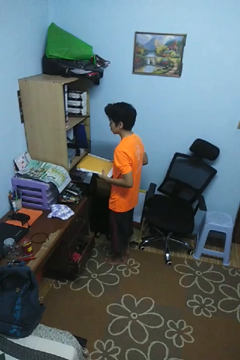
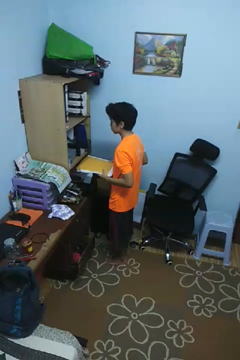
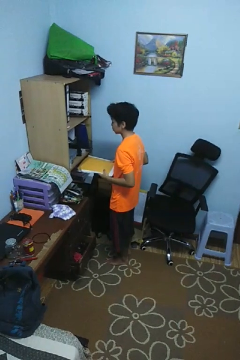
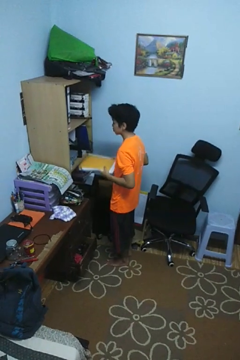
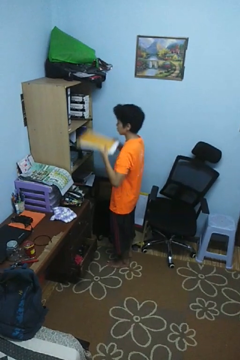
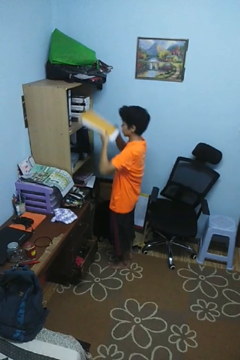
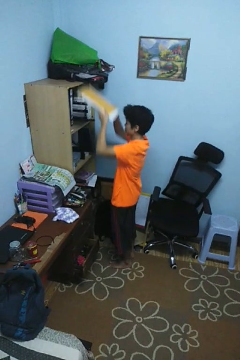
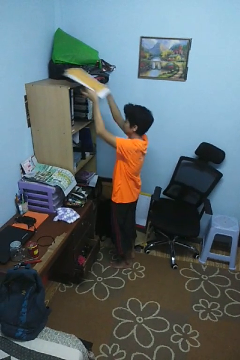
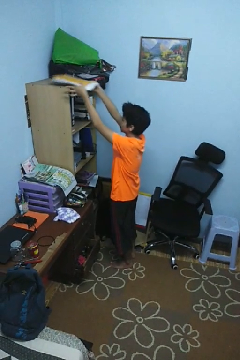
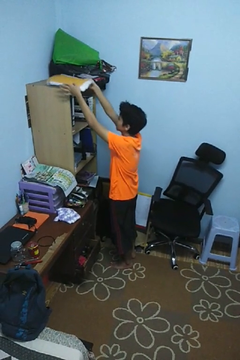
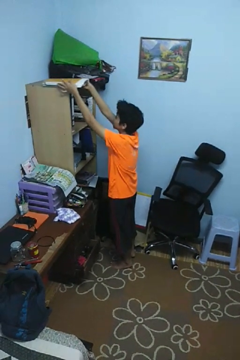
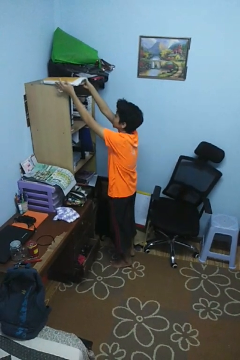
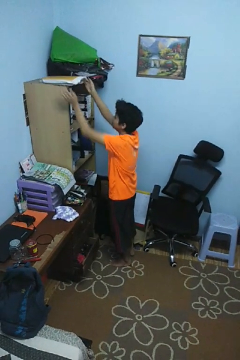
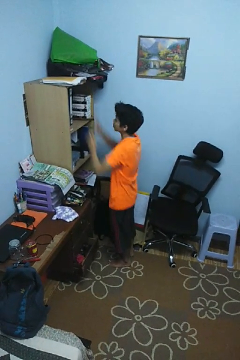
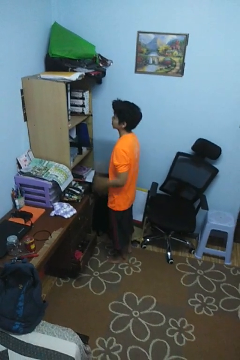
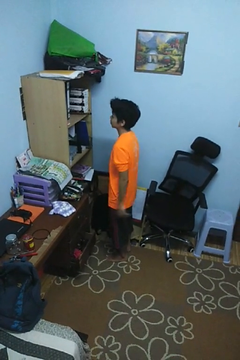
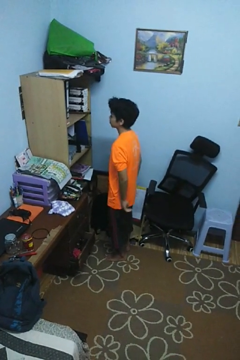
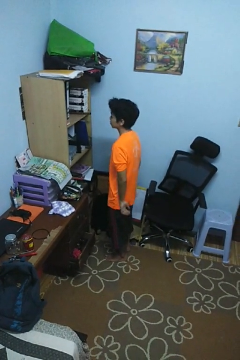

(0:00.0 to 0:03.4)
person puts down object on shelf

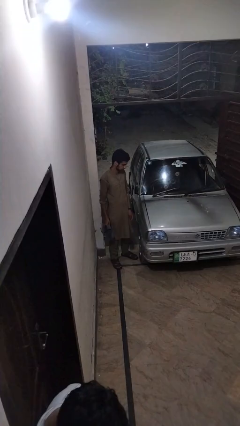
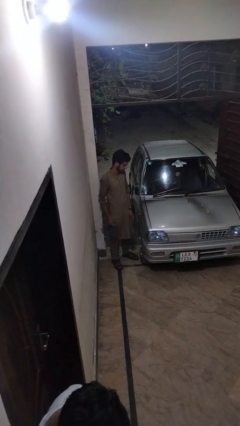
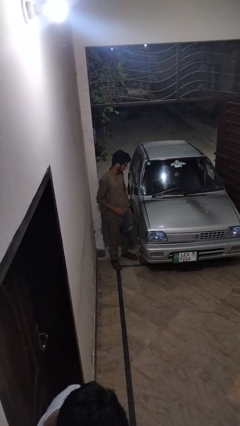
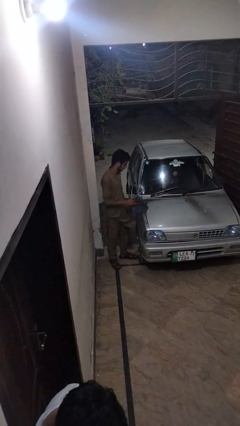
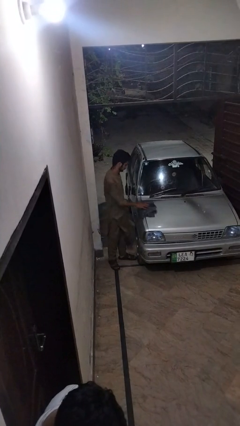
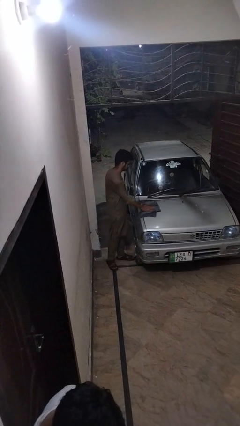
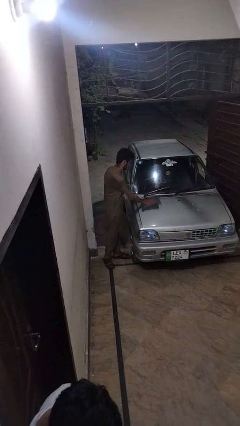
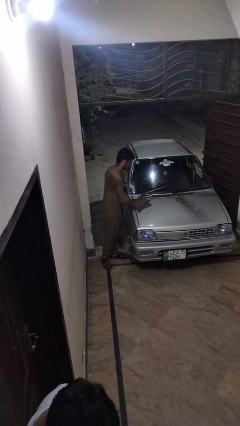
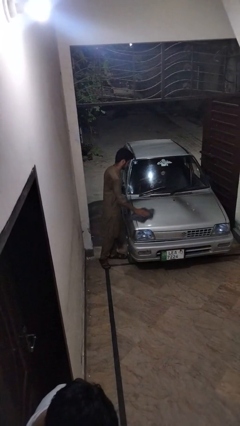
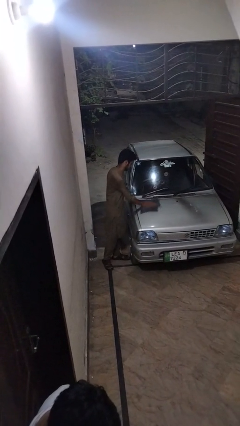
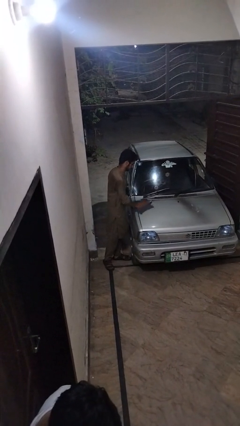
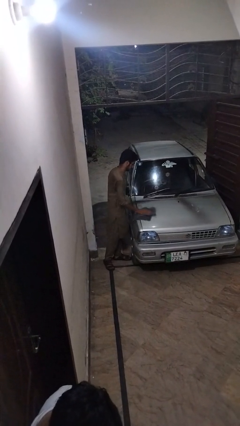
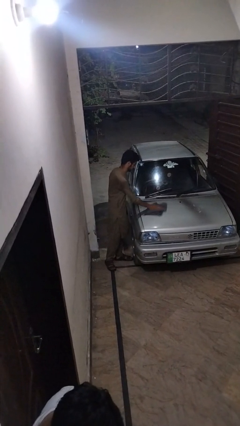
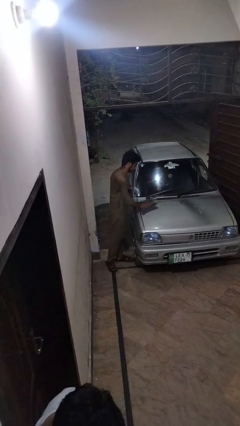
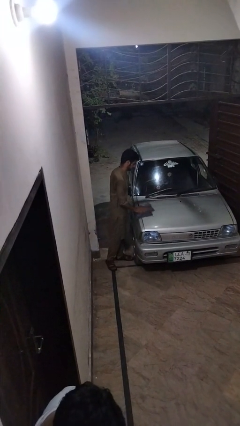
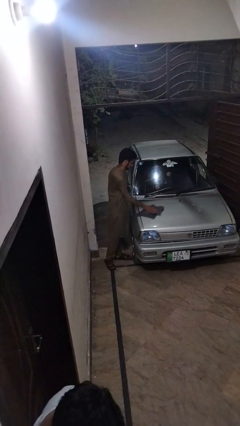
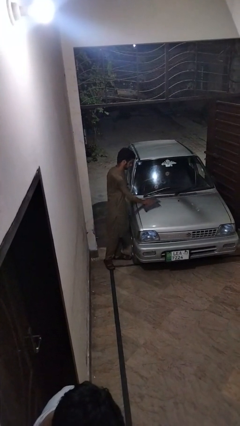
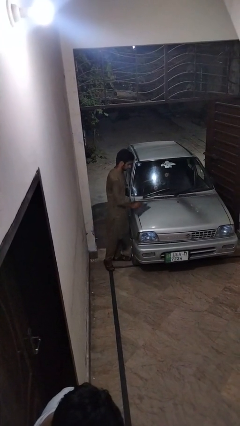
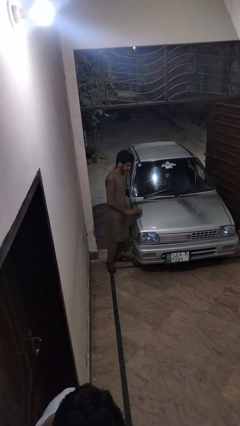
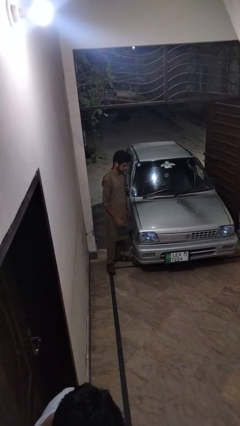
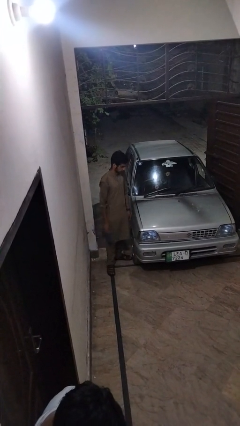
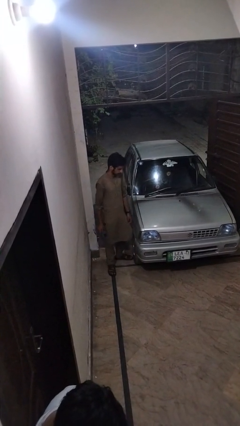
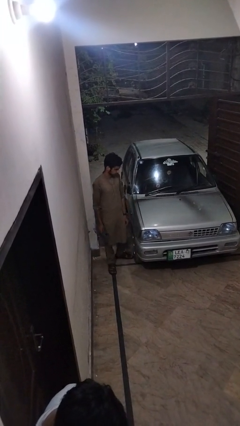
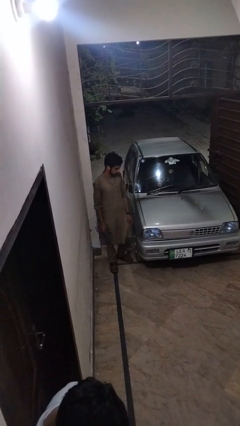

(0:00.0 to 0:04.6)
person polishes car with rag

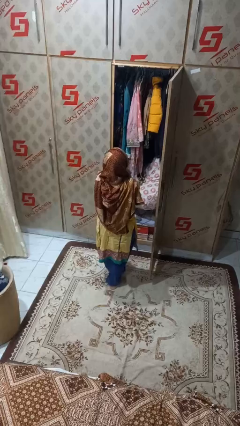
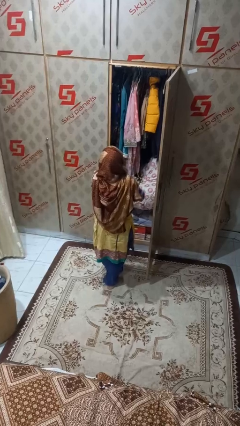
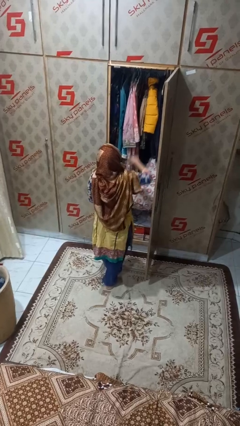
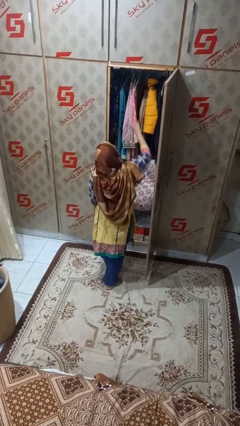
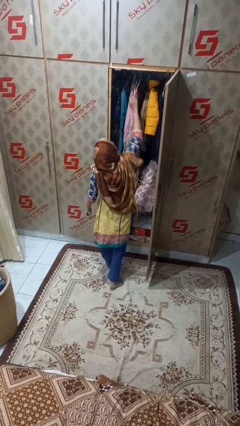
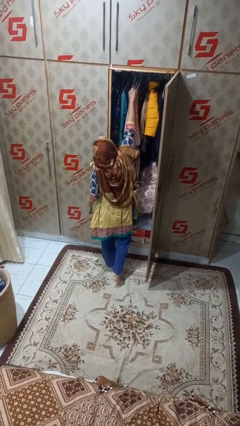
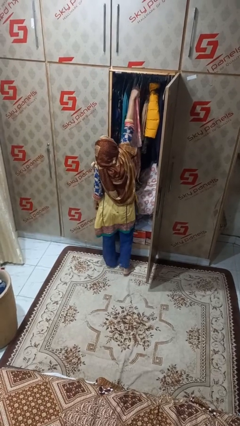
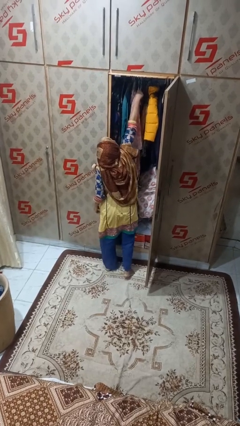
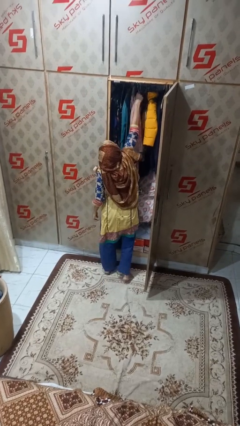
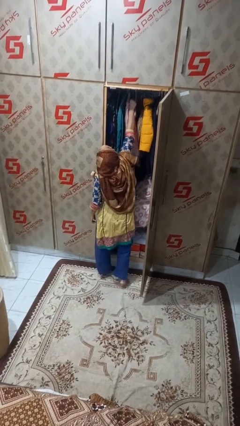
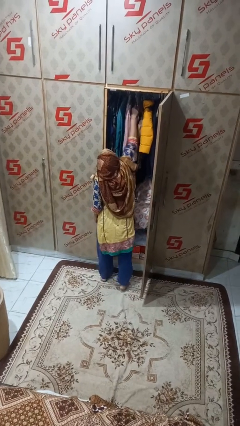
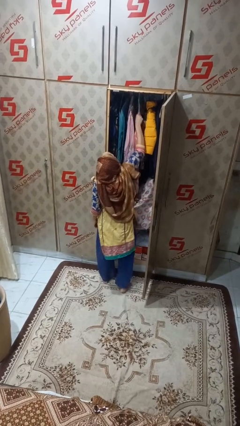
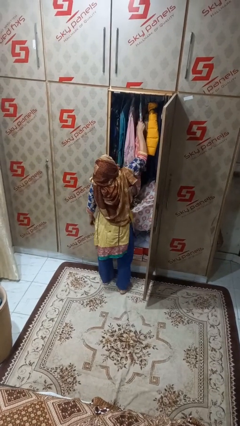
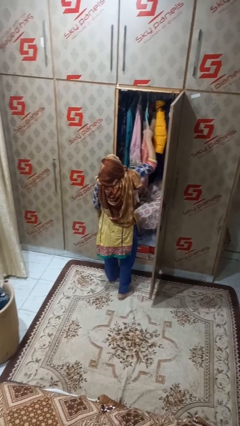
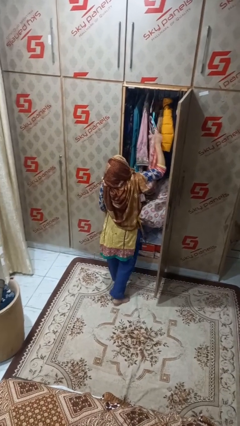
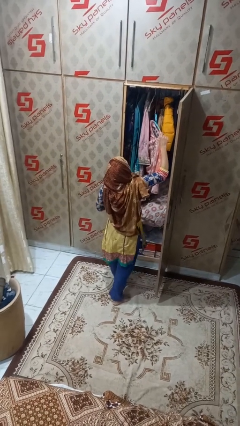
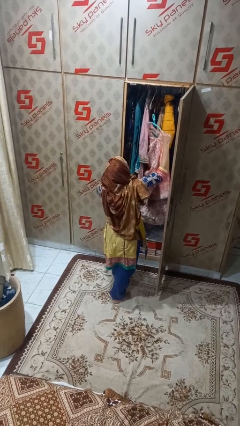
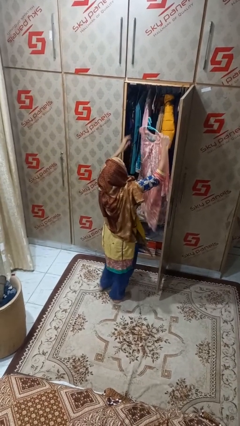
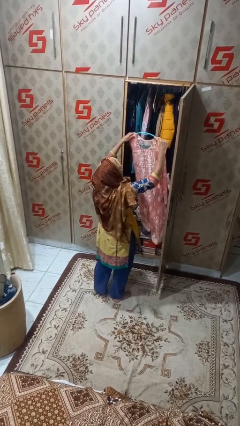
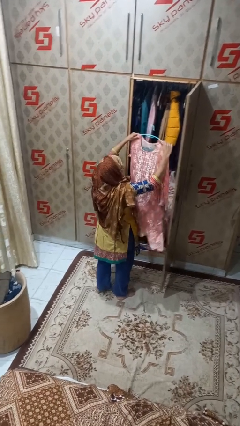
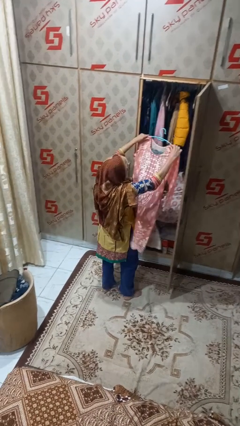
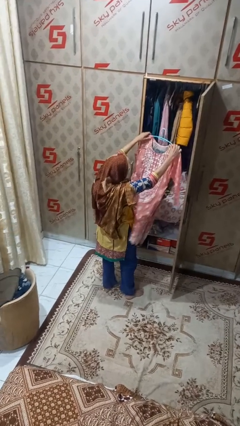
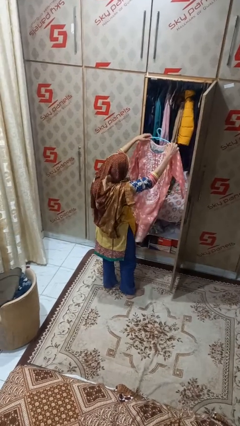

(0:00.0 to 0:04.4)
person takes clothes from closet

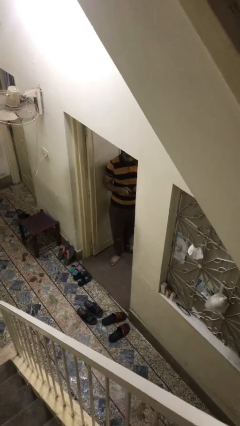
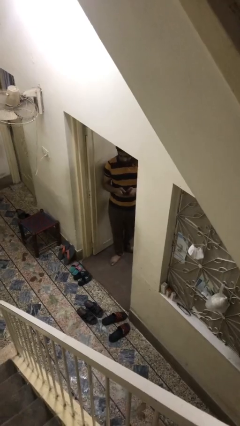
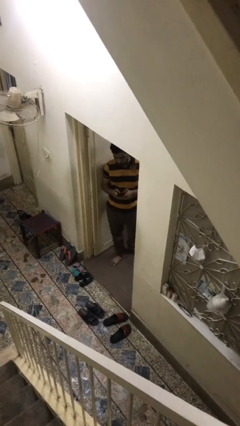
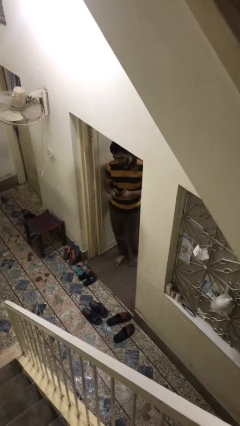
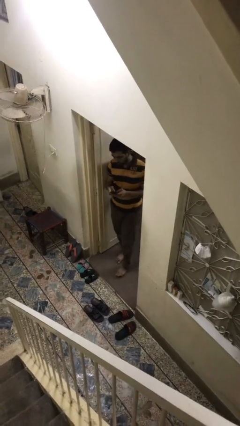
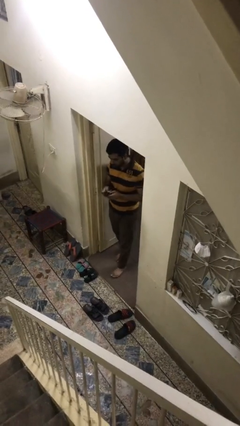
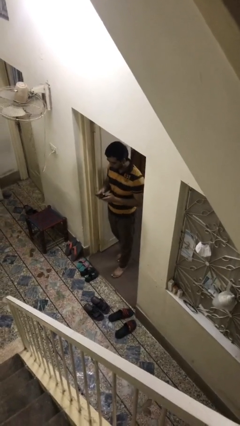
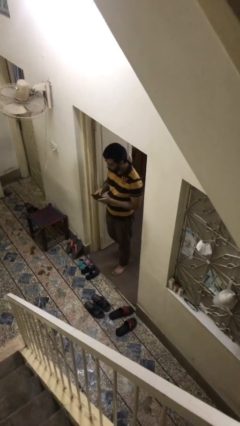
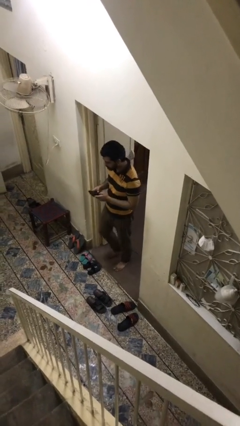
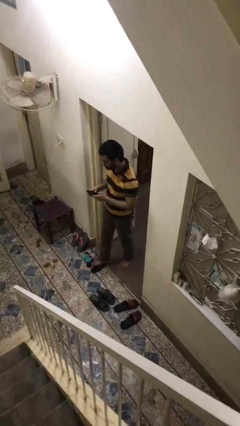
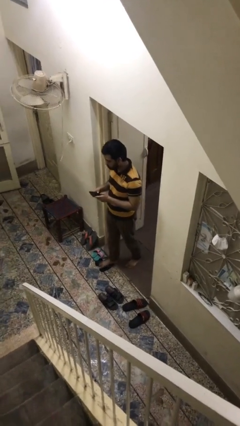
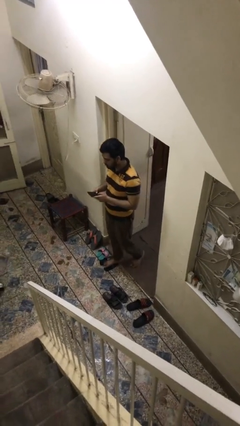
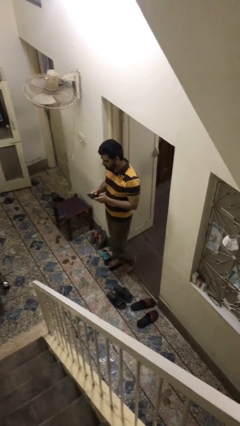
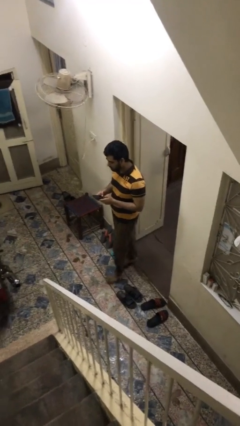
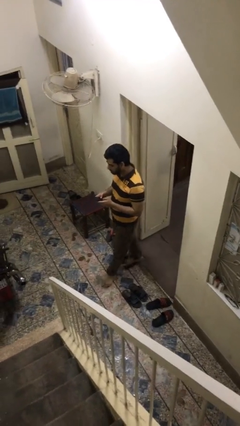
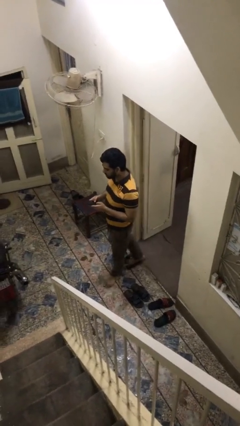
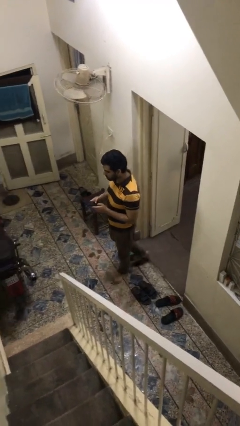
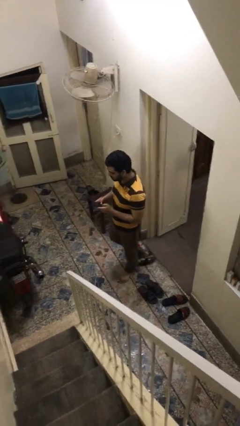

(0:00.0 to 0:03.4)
person enters scene through structure

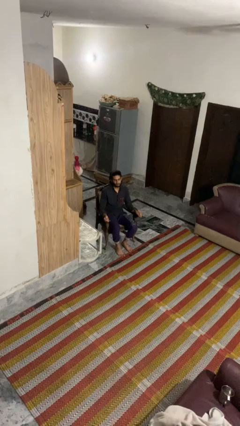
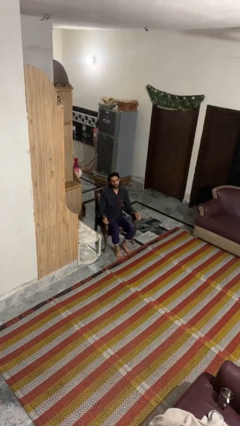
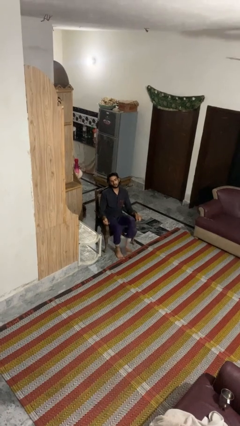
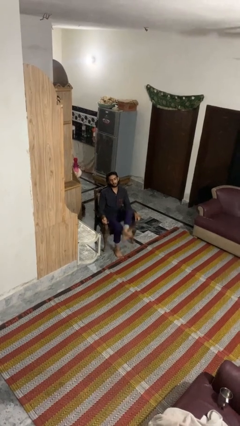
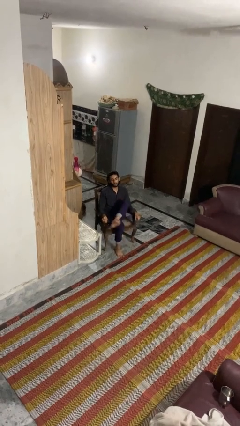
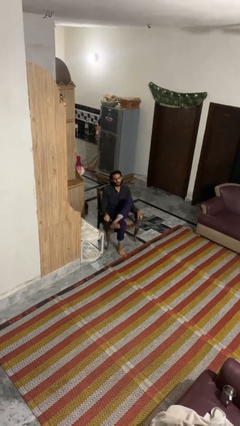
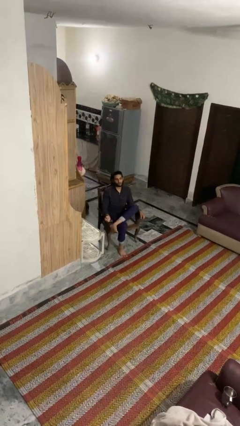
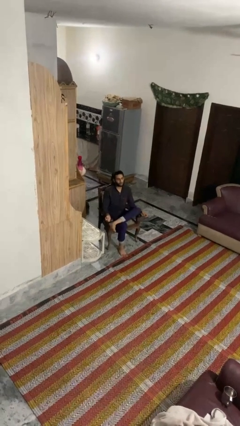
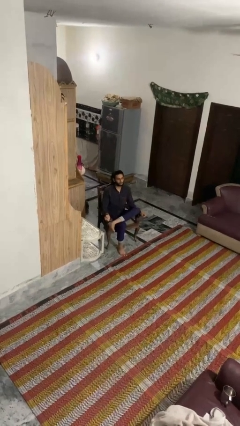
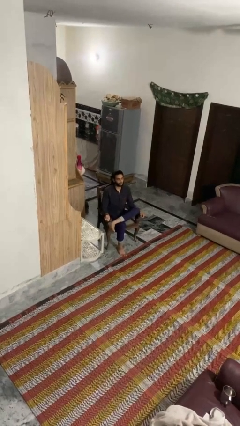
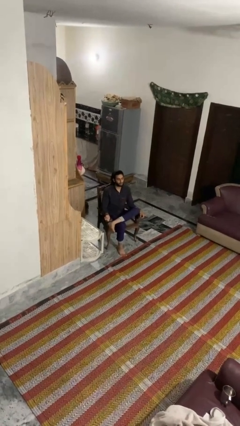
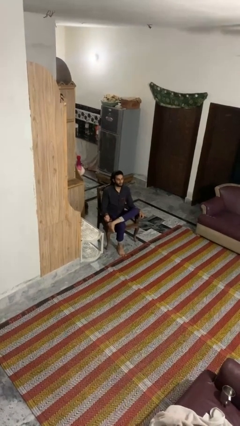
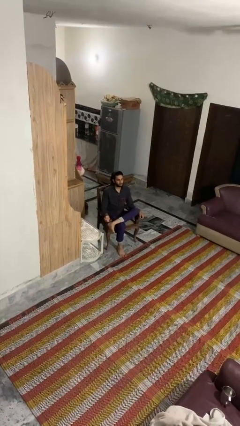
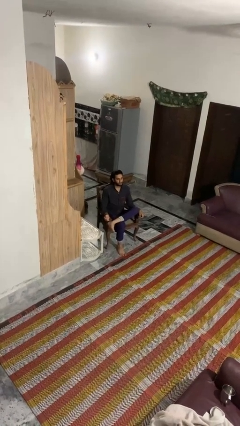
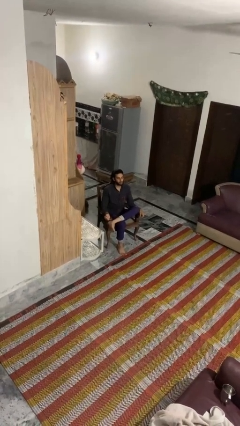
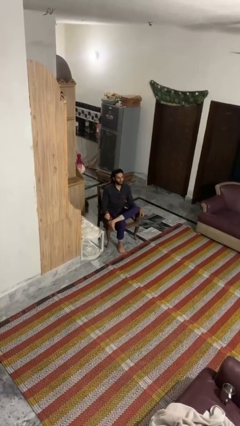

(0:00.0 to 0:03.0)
person crosses legs
